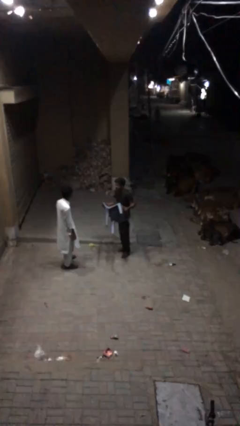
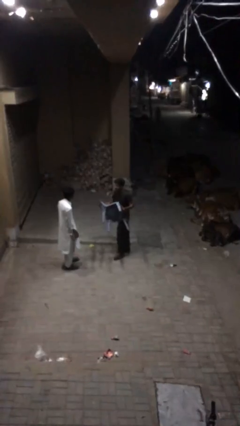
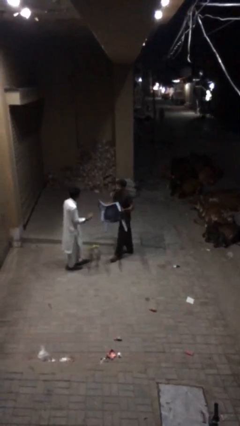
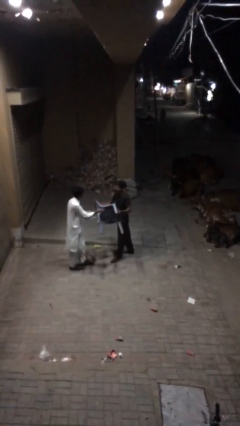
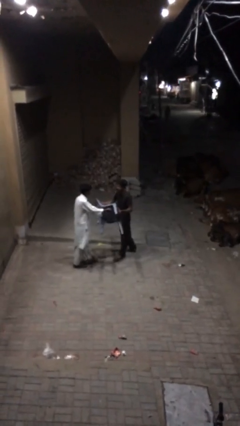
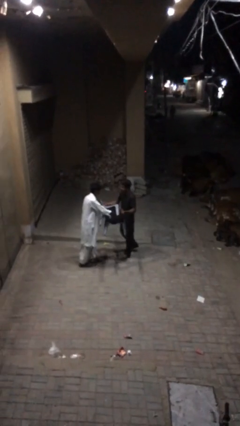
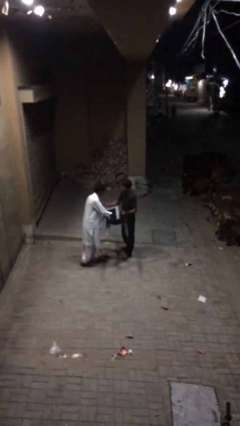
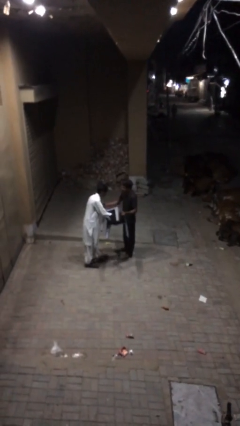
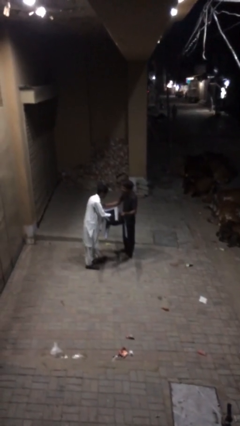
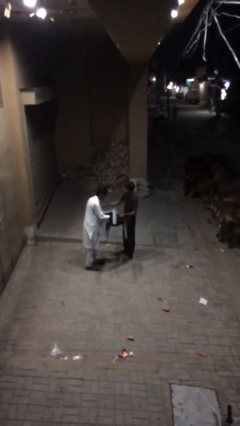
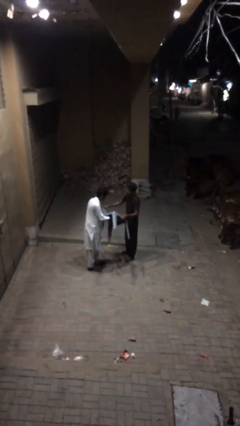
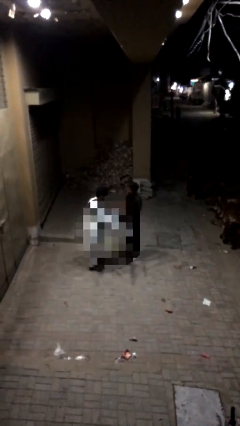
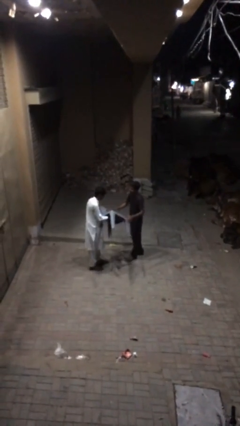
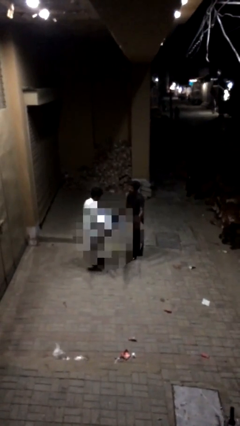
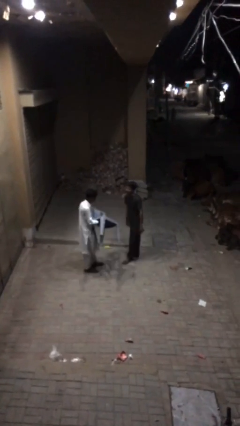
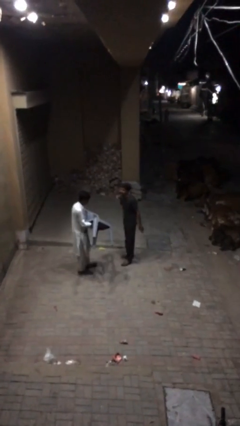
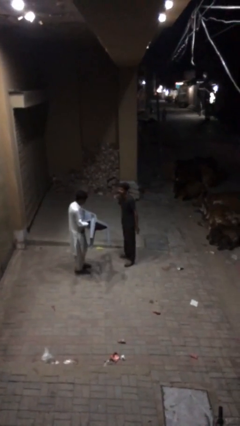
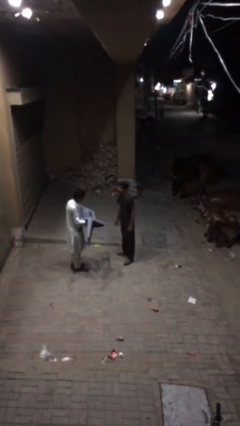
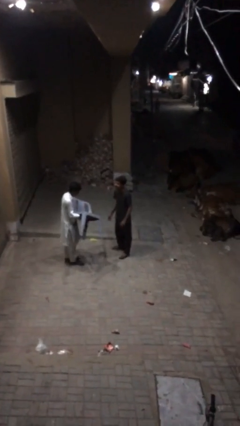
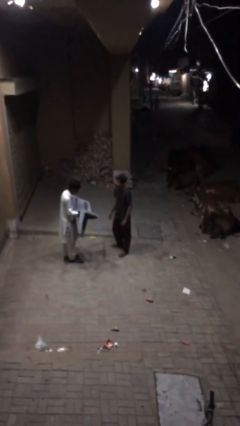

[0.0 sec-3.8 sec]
person transfers object to person

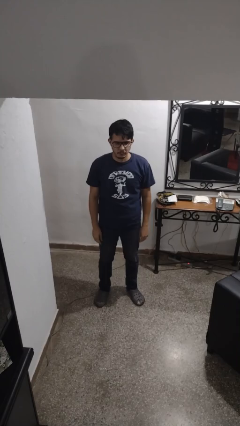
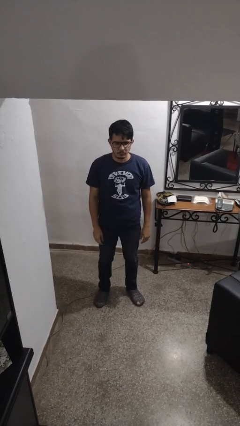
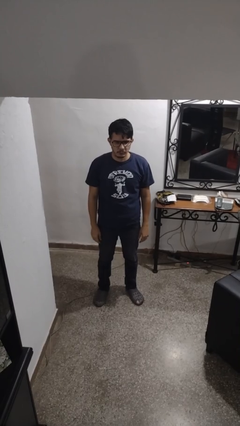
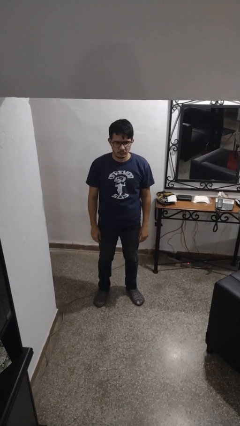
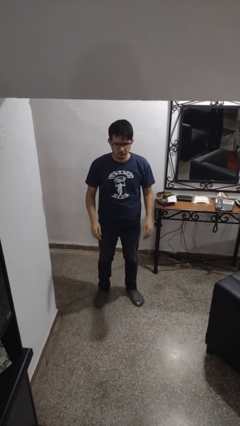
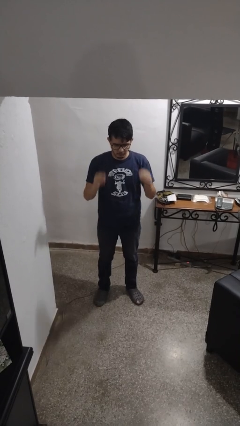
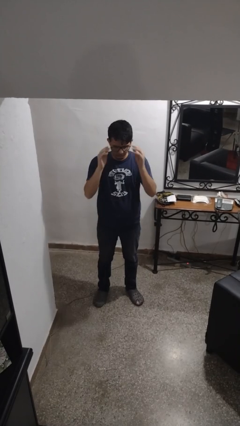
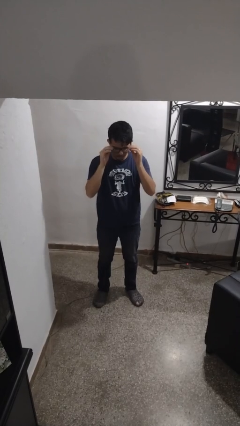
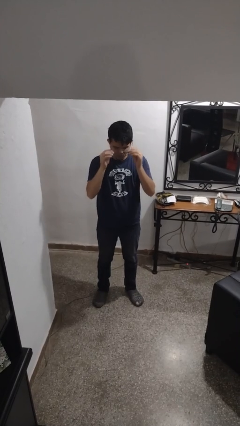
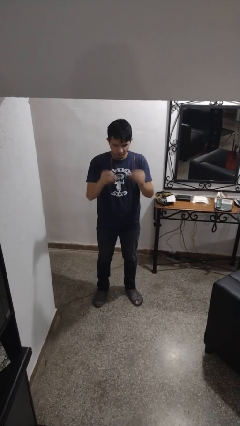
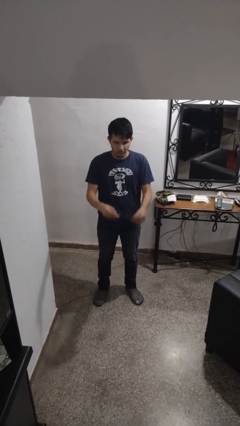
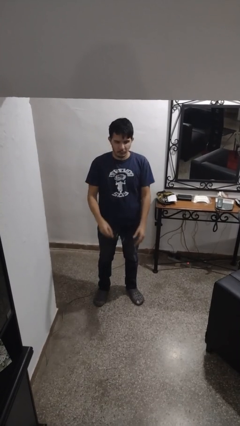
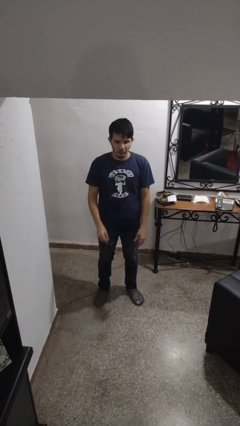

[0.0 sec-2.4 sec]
person takes off glasses

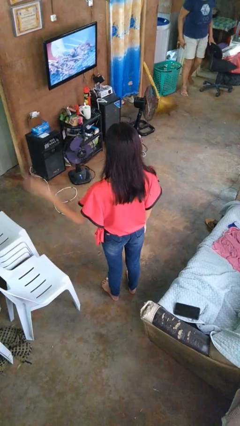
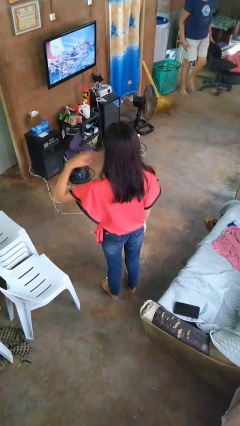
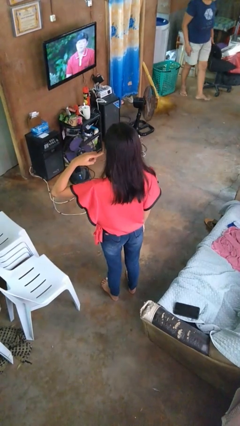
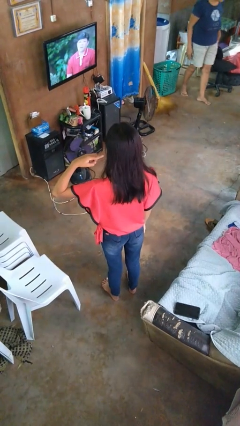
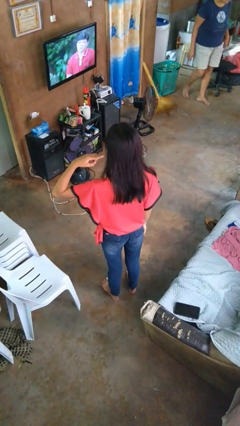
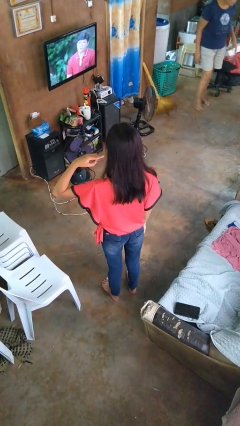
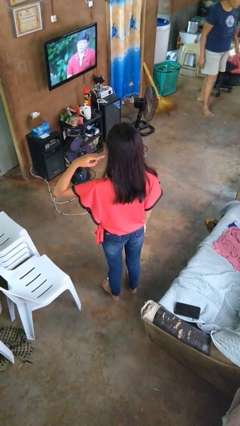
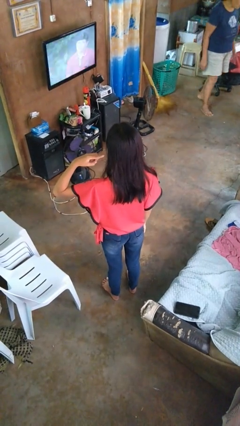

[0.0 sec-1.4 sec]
person gestures listen closely

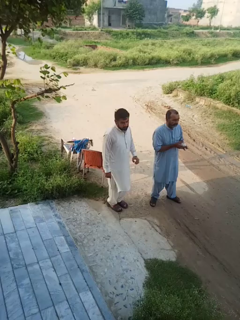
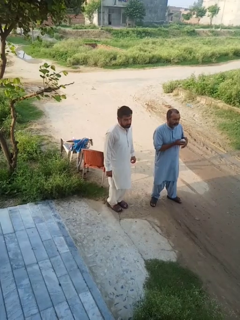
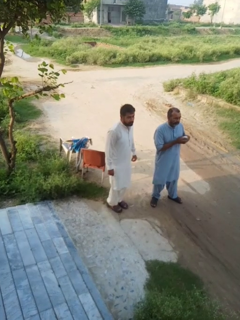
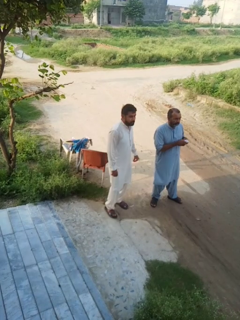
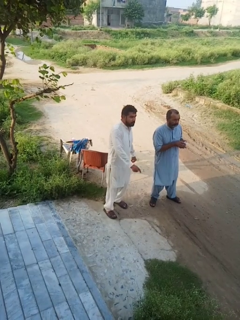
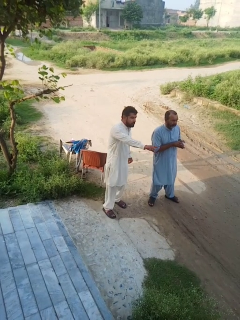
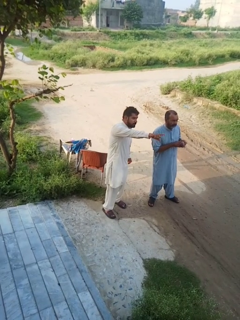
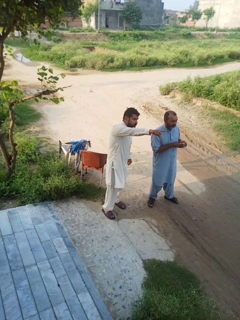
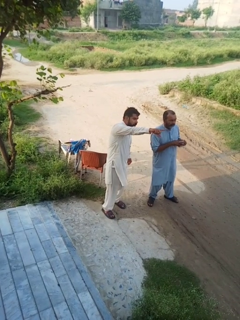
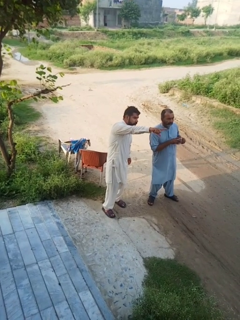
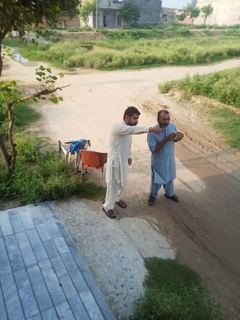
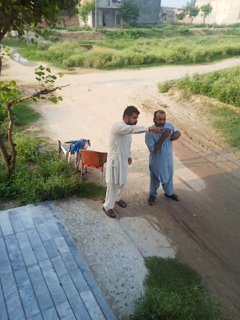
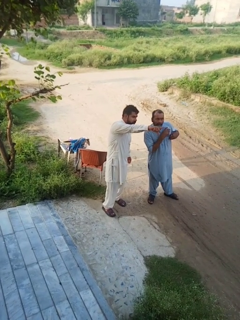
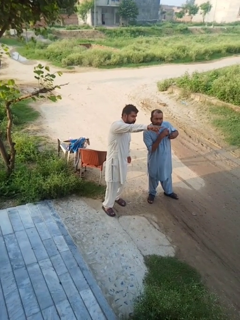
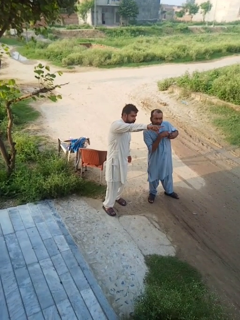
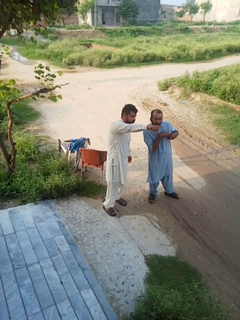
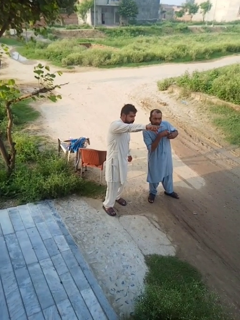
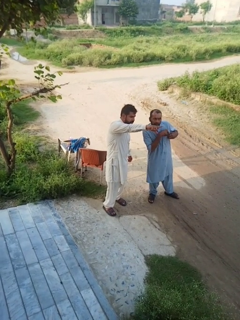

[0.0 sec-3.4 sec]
person points at person

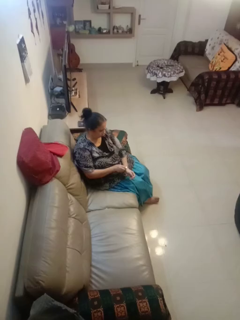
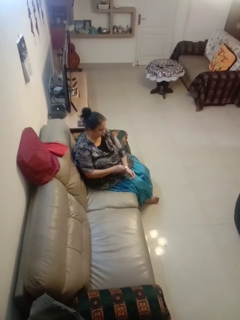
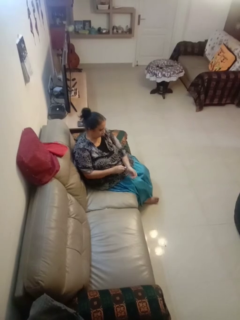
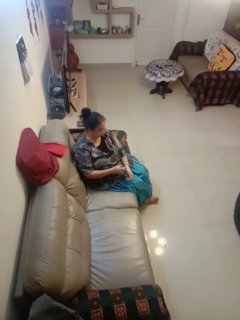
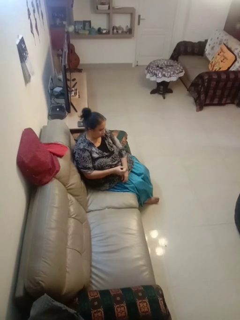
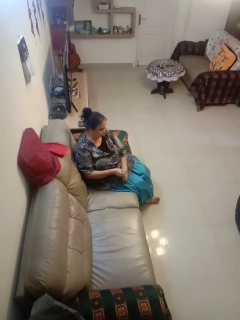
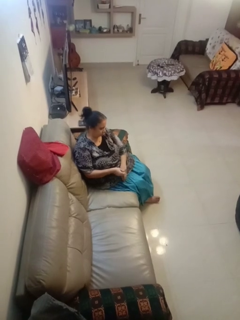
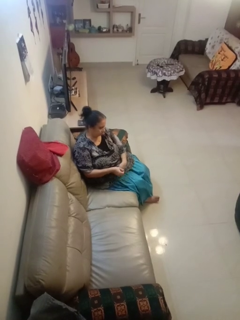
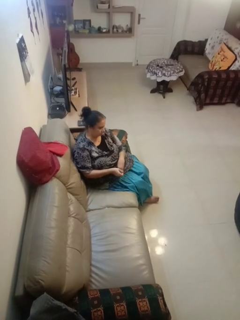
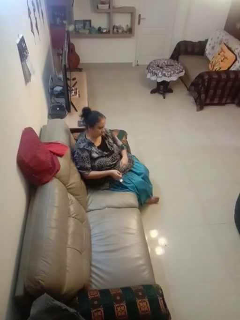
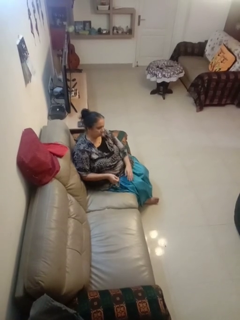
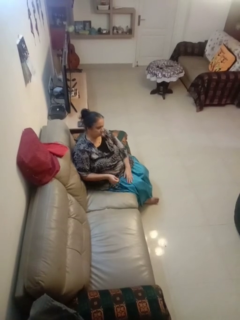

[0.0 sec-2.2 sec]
person takes off wristwatch

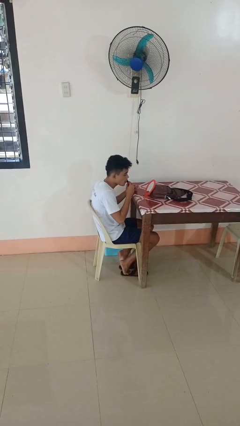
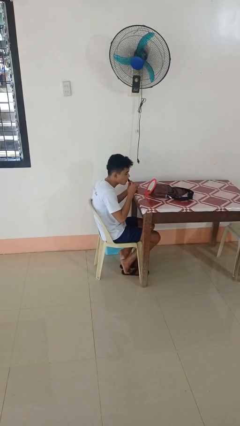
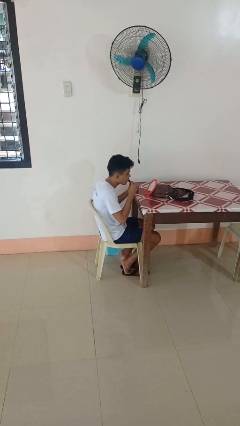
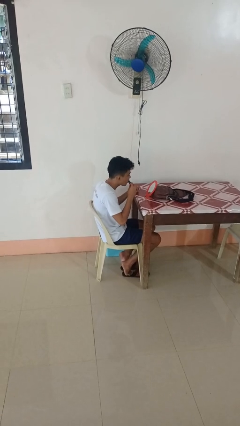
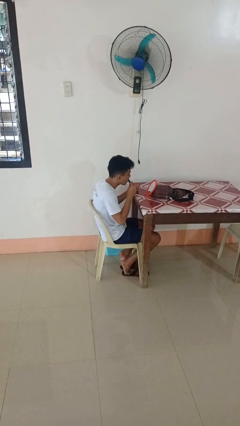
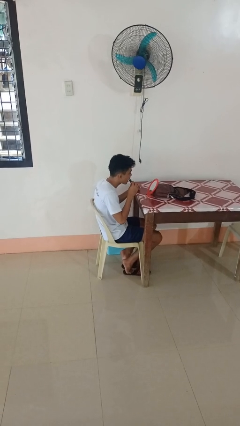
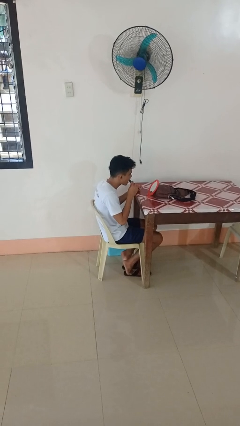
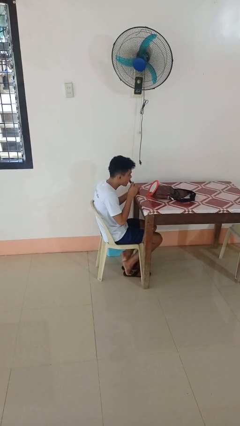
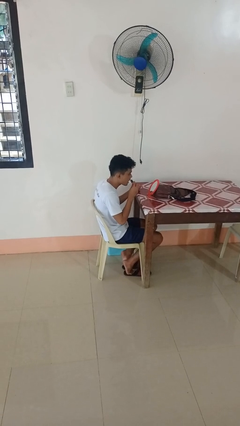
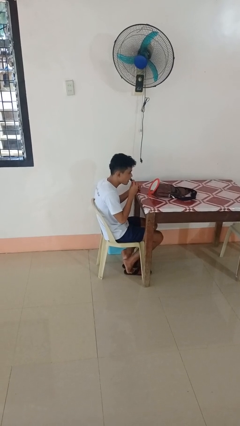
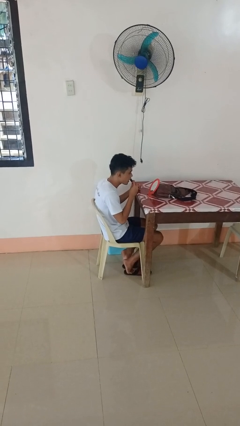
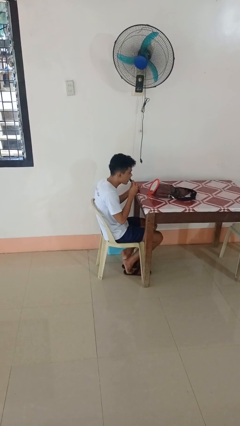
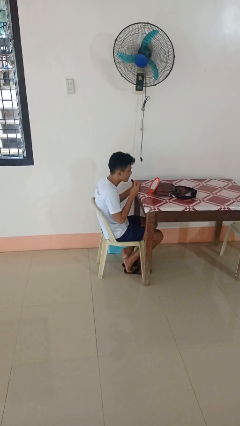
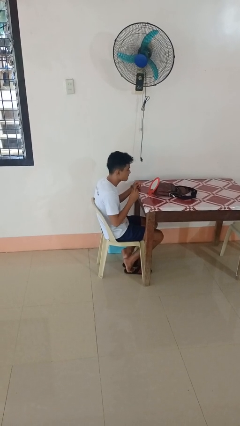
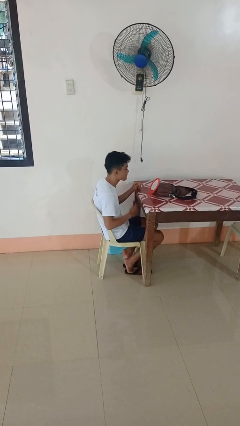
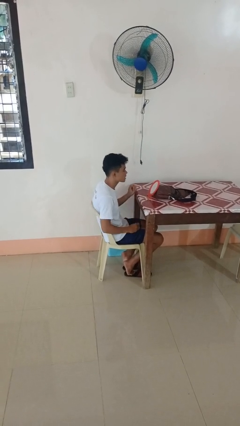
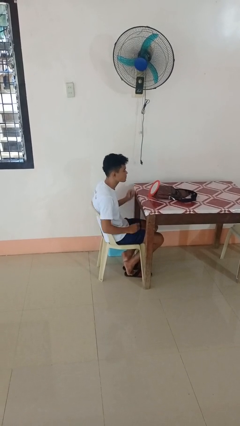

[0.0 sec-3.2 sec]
person applies lip makeup

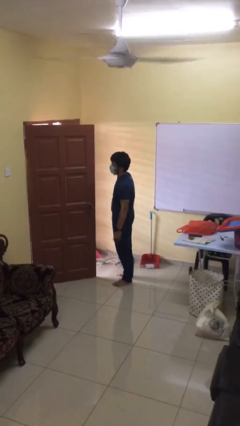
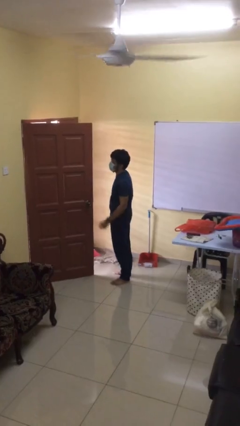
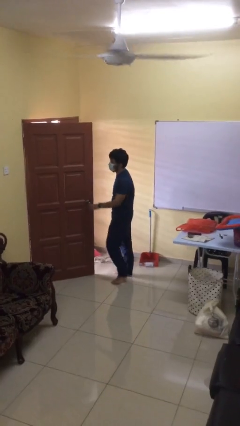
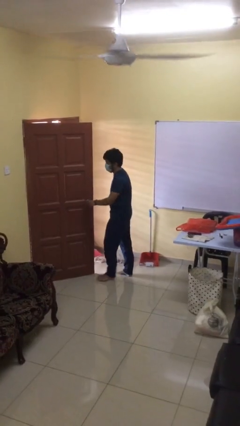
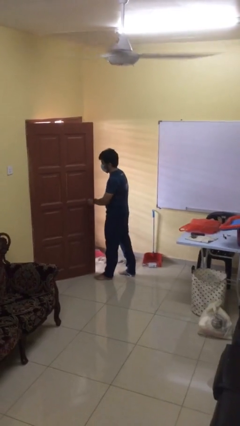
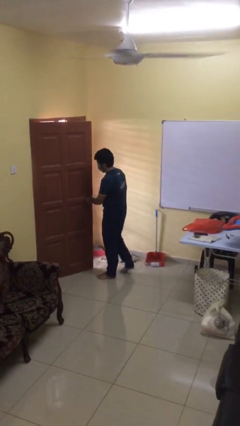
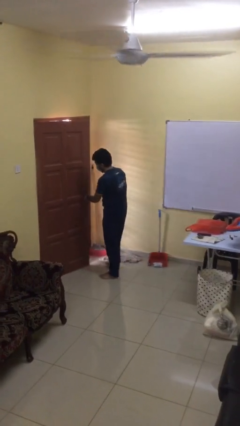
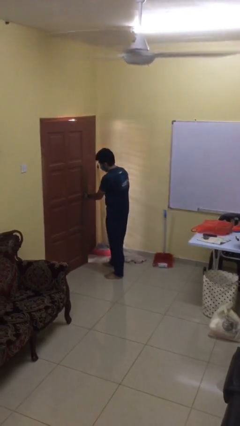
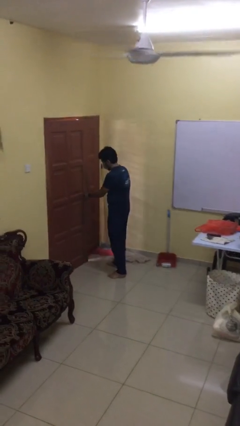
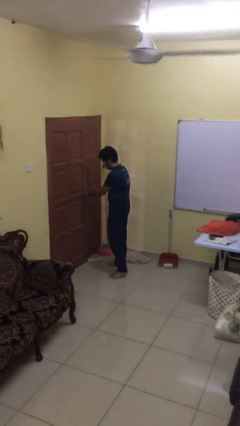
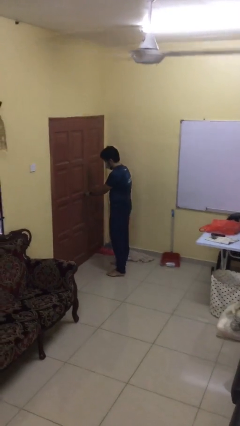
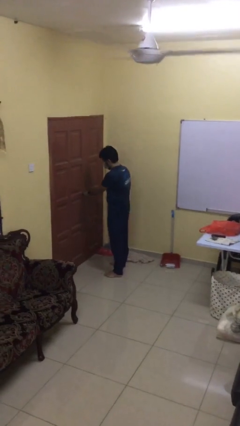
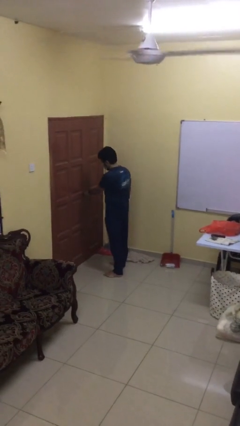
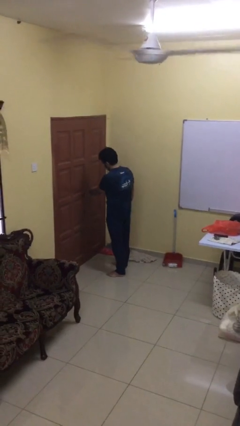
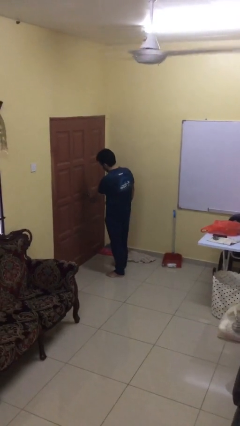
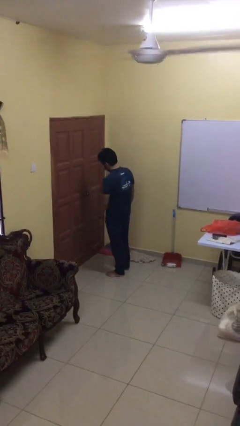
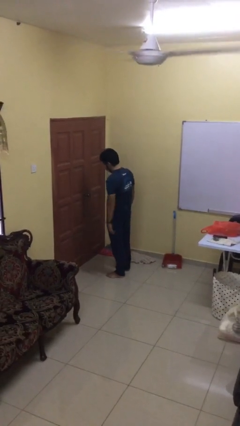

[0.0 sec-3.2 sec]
person closes facility door
